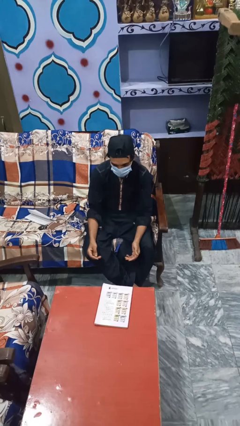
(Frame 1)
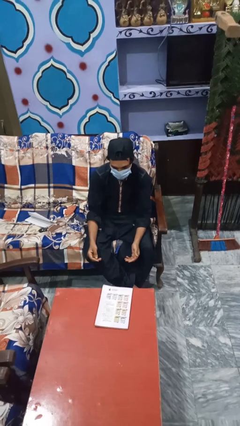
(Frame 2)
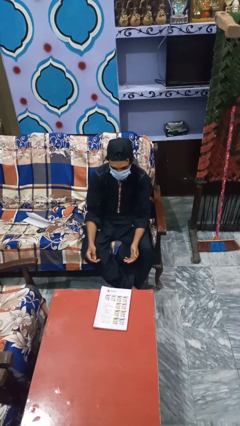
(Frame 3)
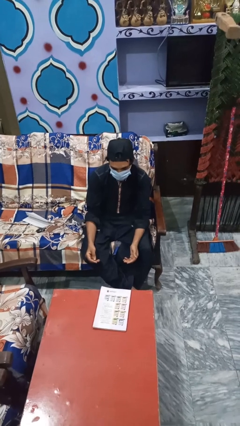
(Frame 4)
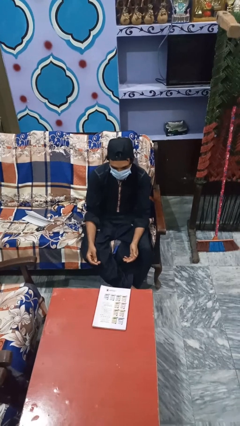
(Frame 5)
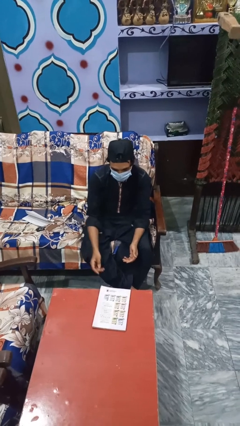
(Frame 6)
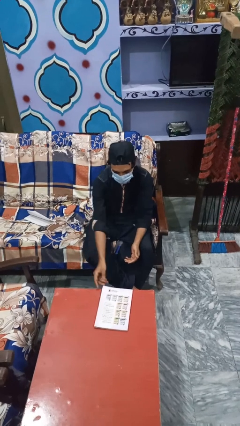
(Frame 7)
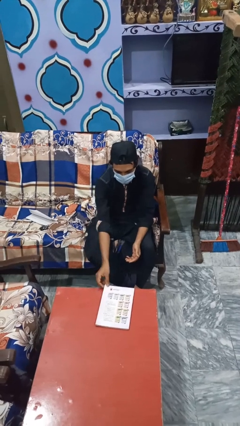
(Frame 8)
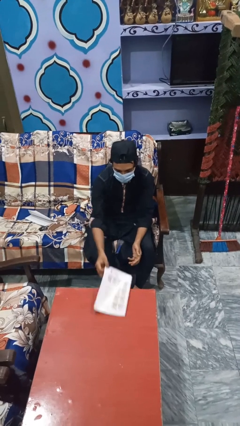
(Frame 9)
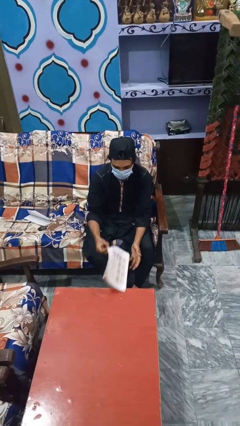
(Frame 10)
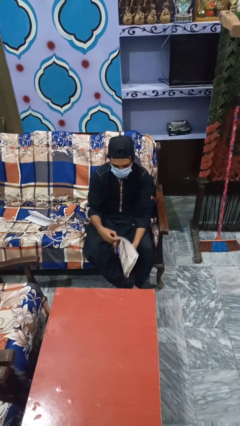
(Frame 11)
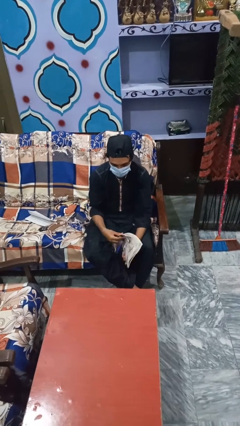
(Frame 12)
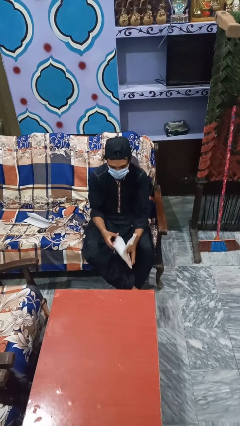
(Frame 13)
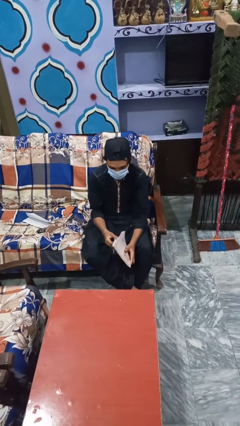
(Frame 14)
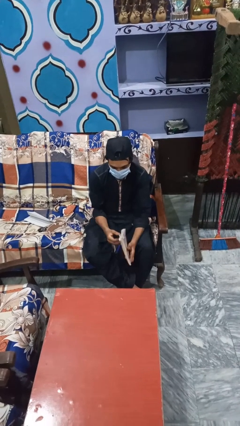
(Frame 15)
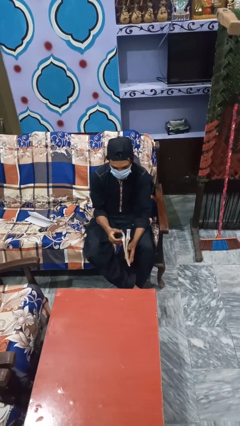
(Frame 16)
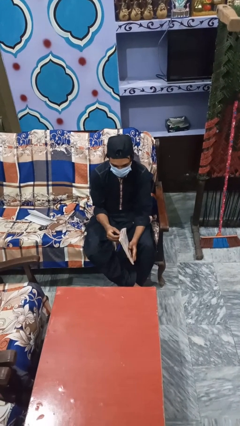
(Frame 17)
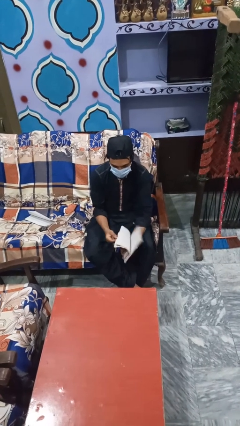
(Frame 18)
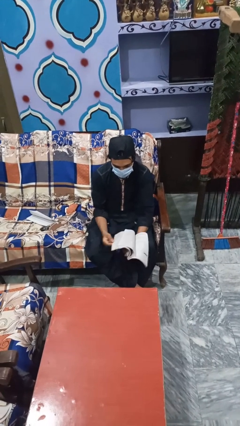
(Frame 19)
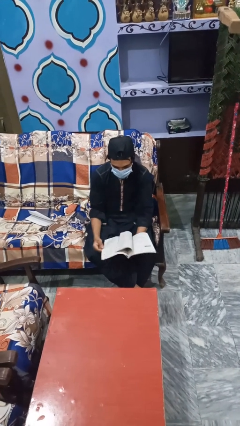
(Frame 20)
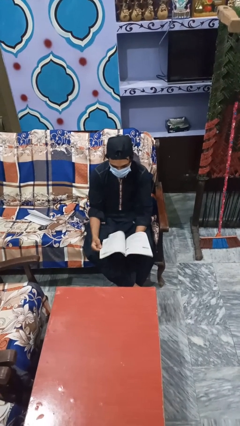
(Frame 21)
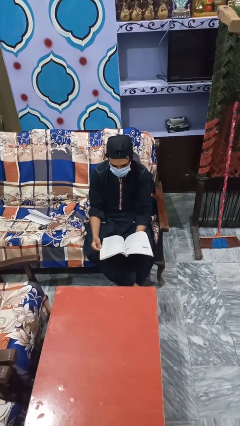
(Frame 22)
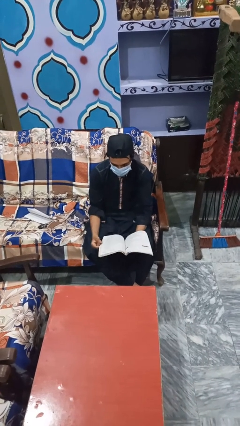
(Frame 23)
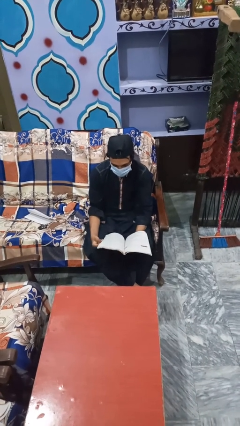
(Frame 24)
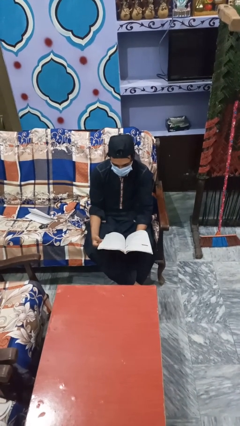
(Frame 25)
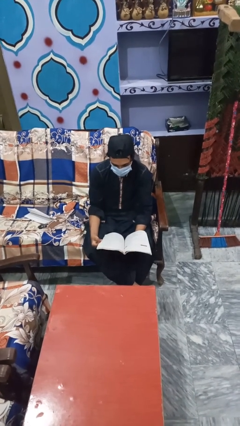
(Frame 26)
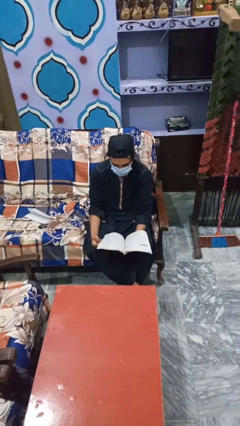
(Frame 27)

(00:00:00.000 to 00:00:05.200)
person reads magazine

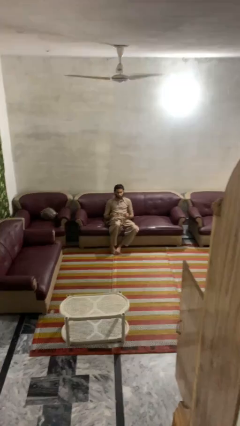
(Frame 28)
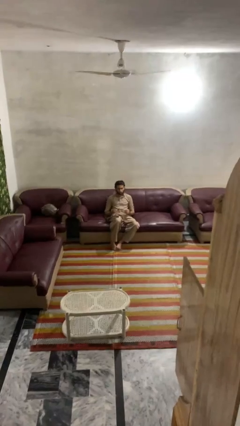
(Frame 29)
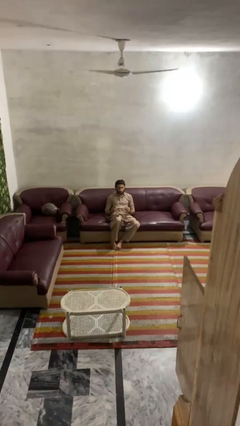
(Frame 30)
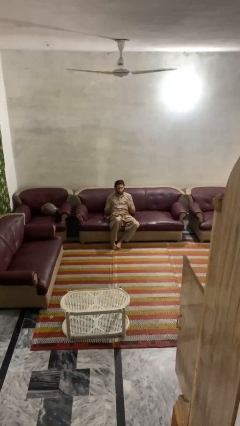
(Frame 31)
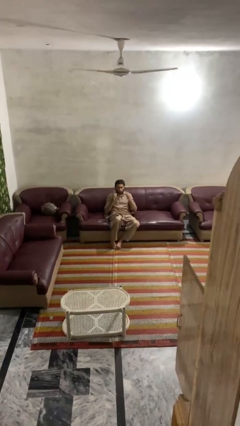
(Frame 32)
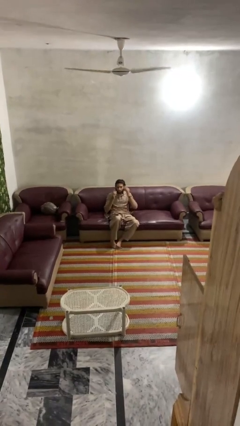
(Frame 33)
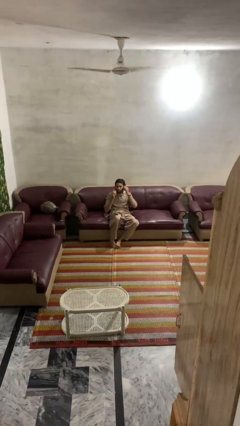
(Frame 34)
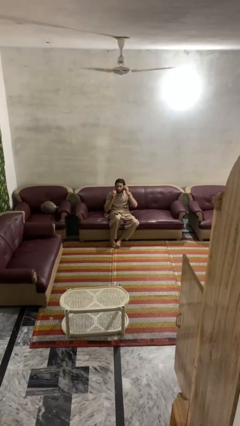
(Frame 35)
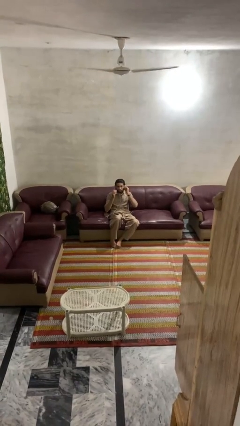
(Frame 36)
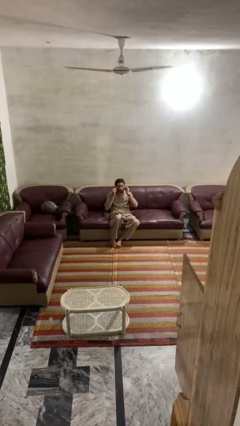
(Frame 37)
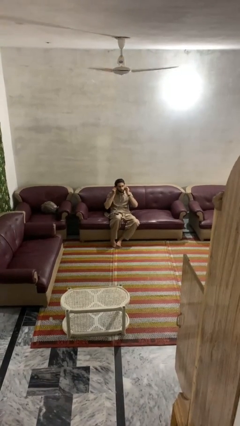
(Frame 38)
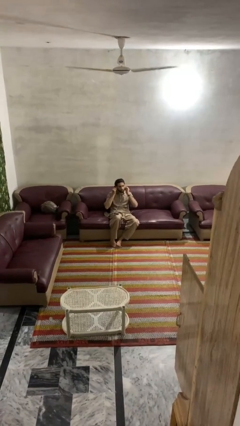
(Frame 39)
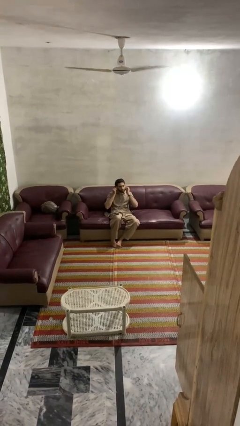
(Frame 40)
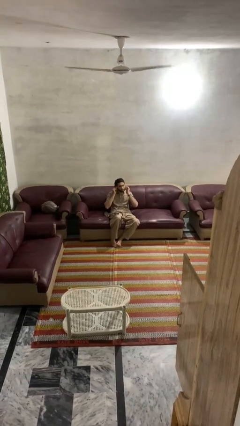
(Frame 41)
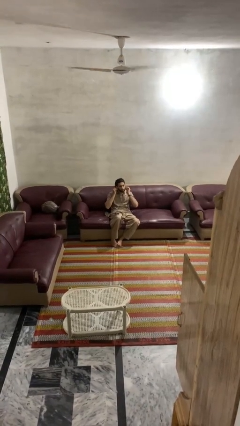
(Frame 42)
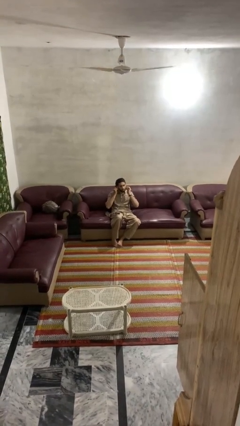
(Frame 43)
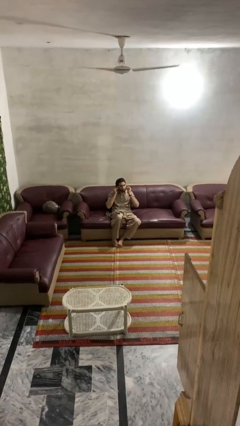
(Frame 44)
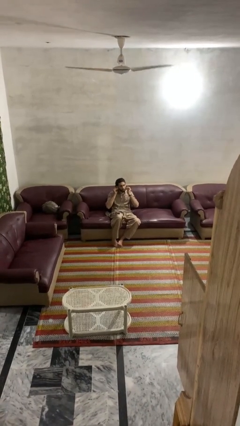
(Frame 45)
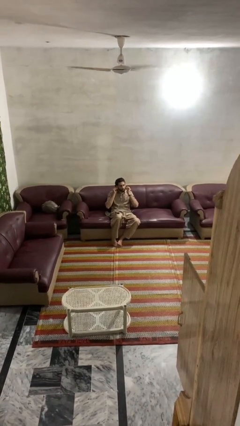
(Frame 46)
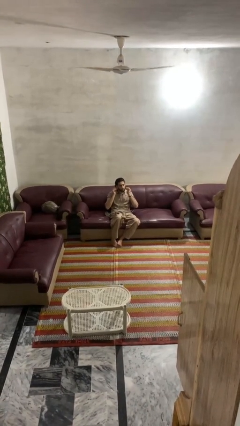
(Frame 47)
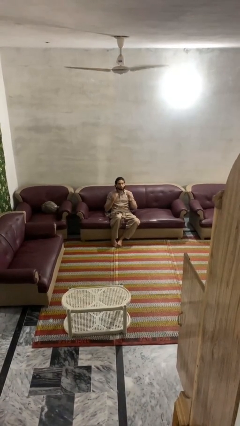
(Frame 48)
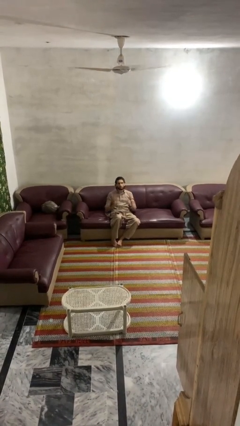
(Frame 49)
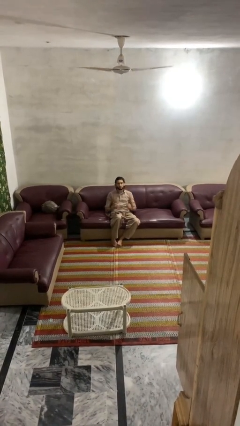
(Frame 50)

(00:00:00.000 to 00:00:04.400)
person puts on headphones

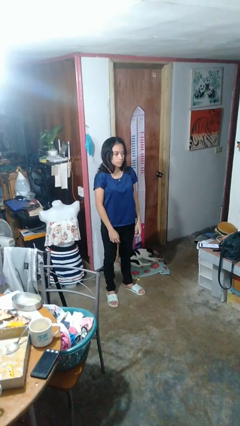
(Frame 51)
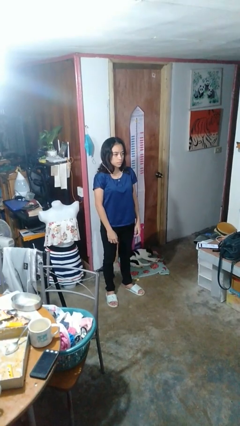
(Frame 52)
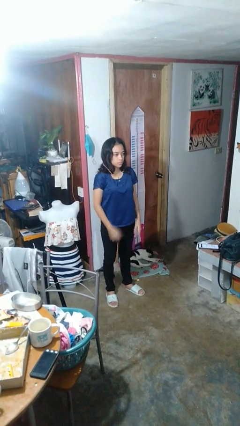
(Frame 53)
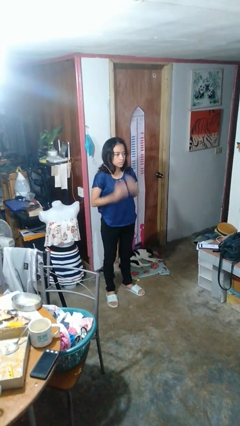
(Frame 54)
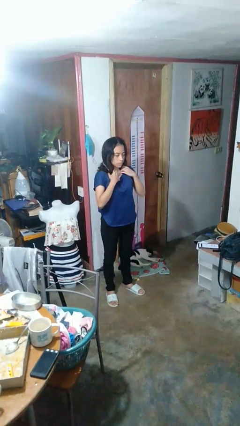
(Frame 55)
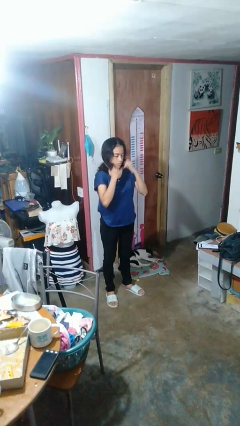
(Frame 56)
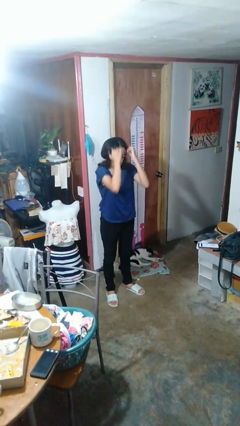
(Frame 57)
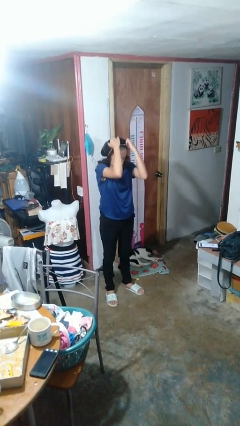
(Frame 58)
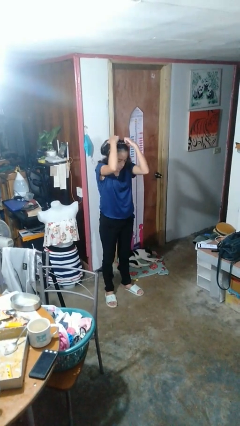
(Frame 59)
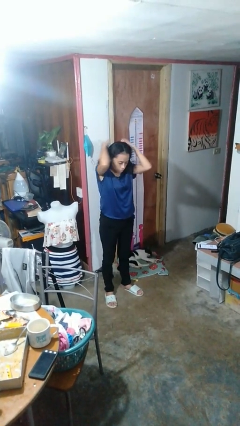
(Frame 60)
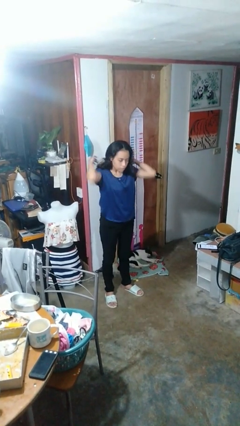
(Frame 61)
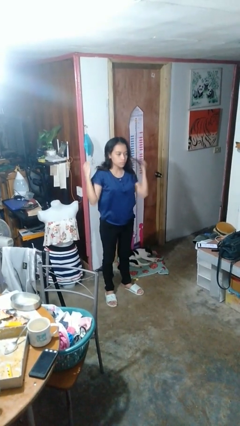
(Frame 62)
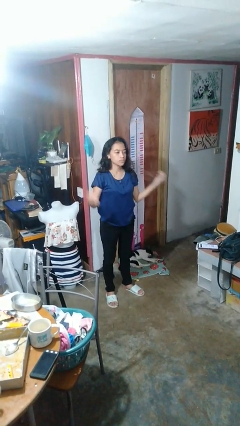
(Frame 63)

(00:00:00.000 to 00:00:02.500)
person takes off necklace

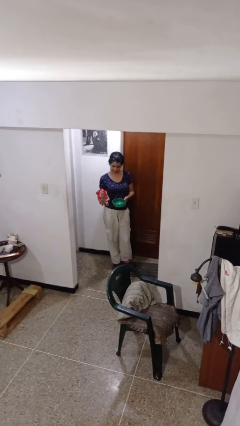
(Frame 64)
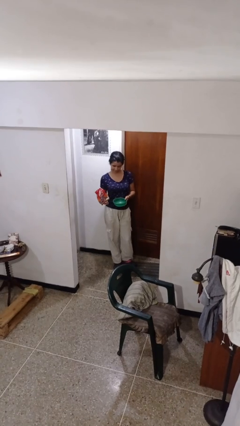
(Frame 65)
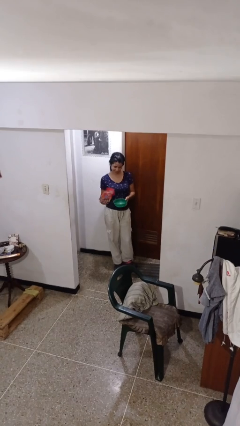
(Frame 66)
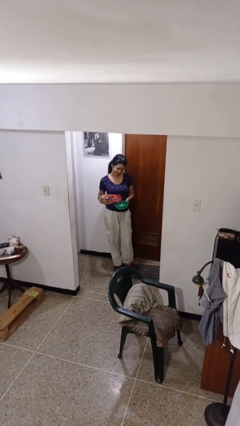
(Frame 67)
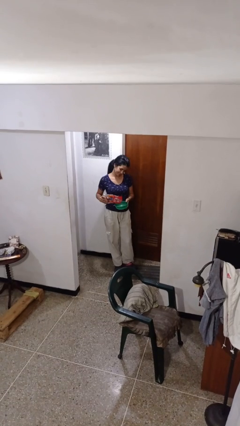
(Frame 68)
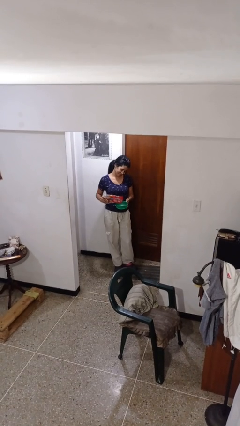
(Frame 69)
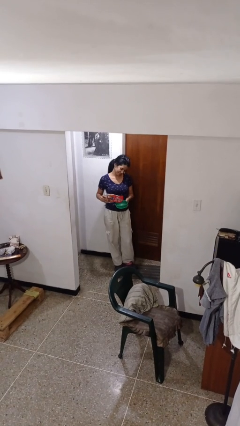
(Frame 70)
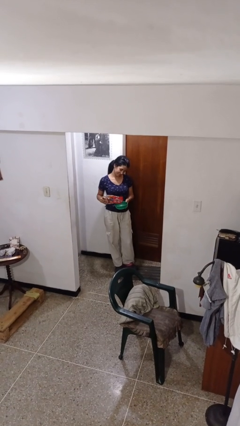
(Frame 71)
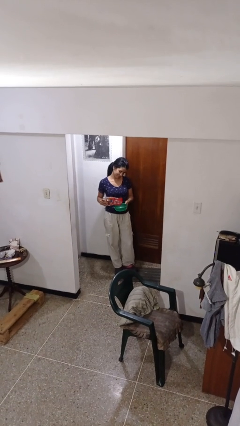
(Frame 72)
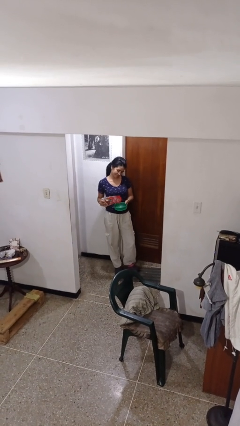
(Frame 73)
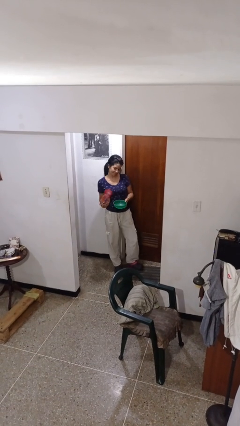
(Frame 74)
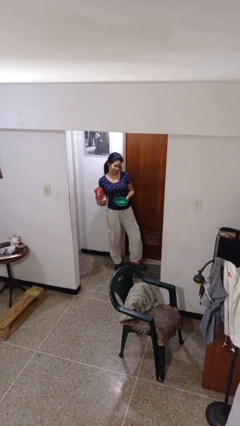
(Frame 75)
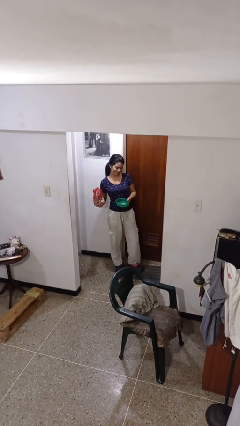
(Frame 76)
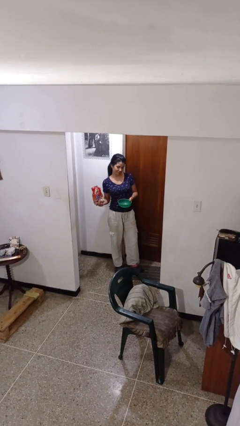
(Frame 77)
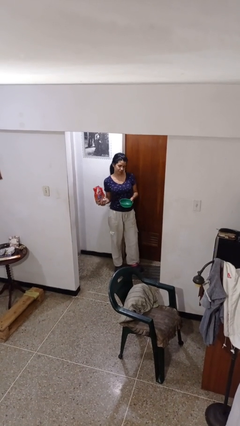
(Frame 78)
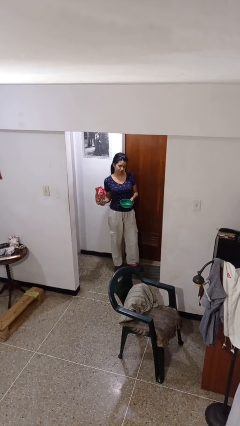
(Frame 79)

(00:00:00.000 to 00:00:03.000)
person pours into bowl

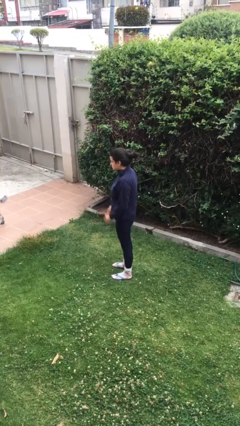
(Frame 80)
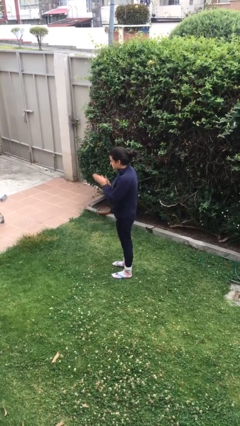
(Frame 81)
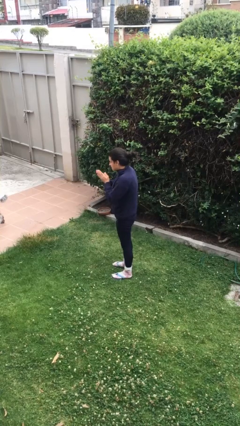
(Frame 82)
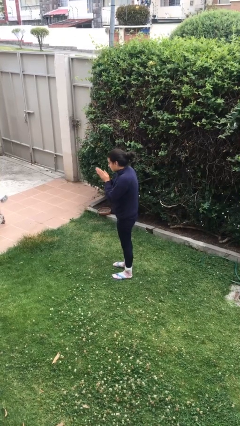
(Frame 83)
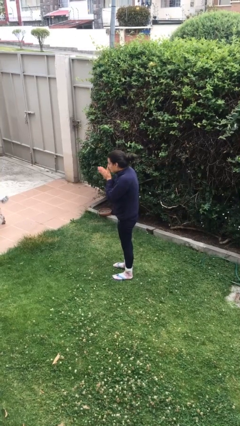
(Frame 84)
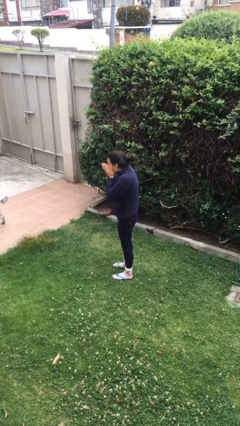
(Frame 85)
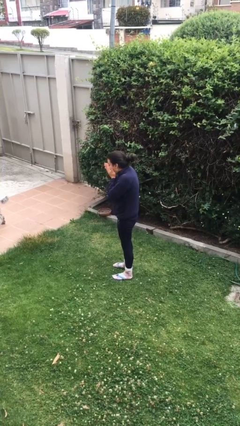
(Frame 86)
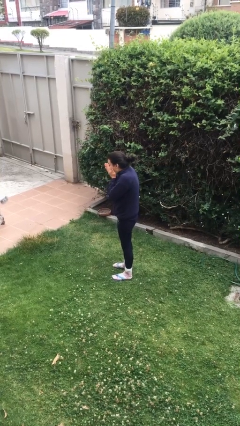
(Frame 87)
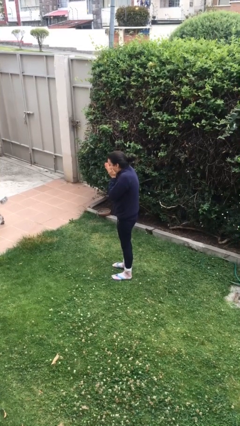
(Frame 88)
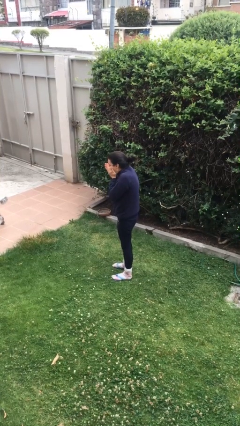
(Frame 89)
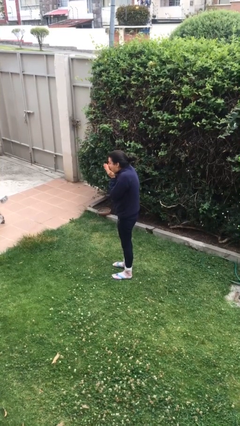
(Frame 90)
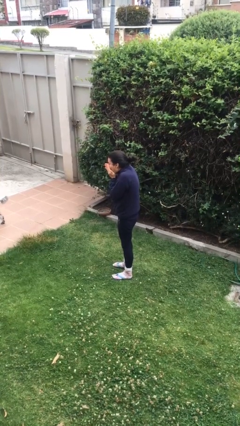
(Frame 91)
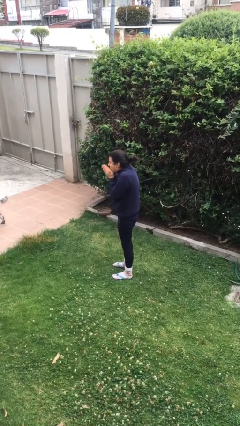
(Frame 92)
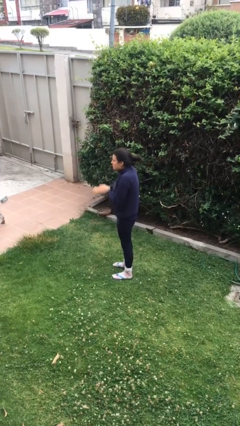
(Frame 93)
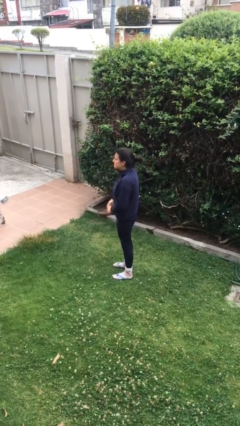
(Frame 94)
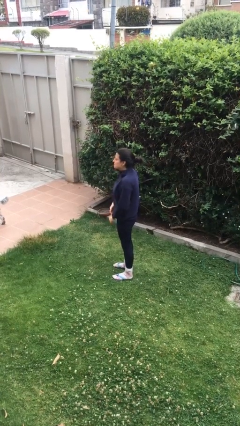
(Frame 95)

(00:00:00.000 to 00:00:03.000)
person blows into hands
